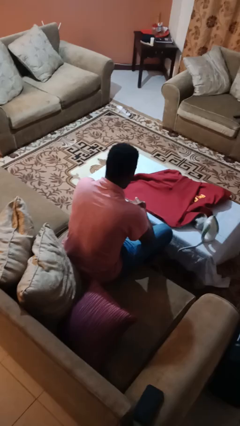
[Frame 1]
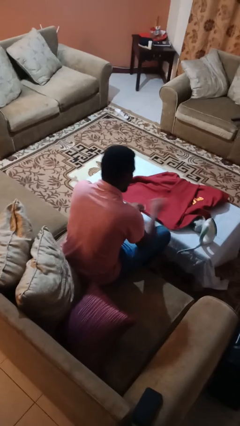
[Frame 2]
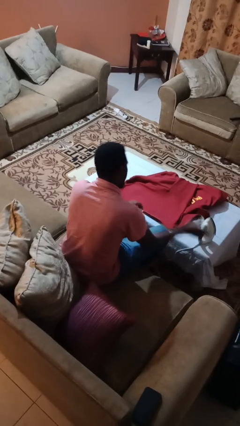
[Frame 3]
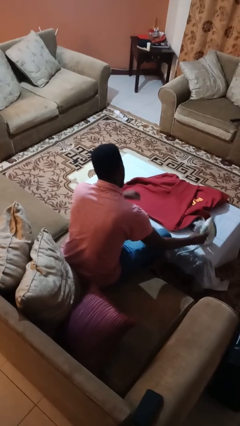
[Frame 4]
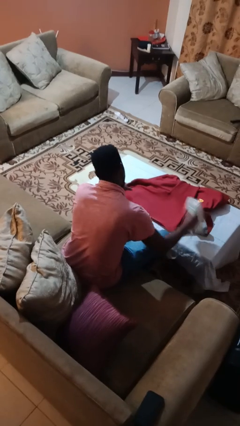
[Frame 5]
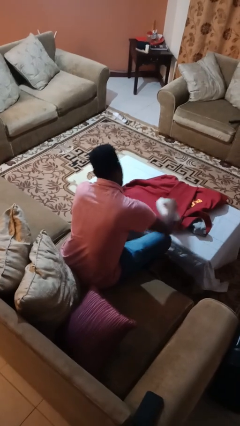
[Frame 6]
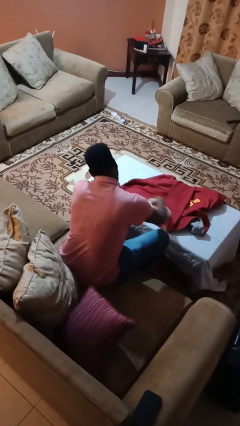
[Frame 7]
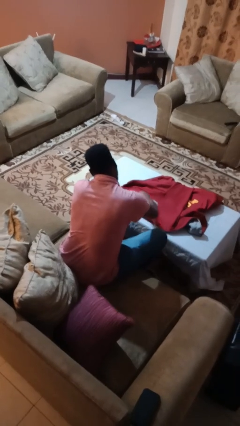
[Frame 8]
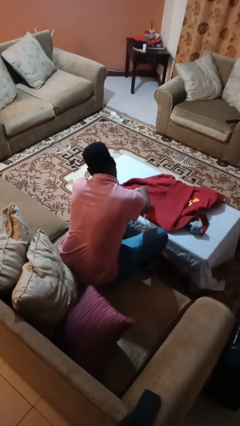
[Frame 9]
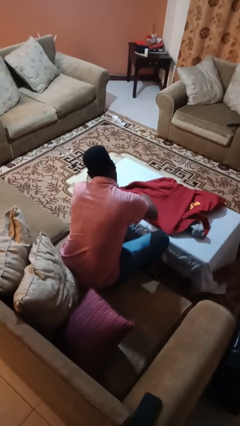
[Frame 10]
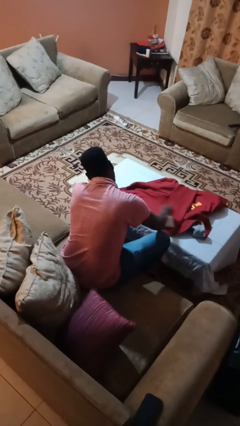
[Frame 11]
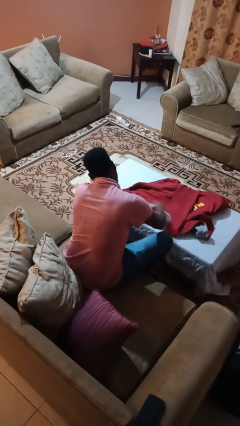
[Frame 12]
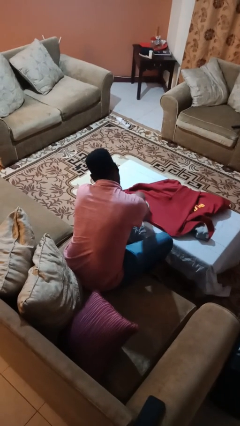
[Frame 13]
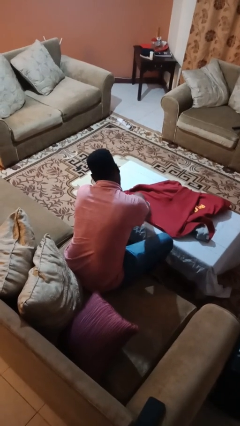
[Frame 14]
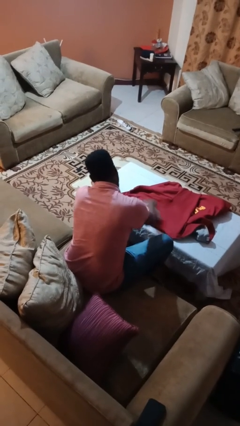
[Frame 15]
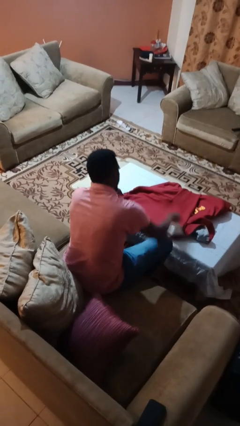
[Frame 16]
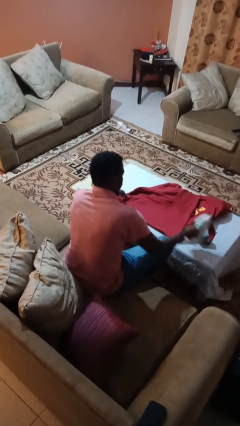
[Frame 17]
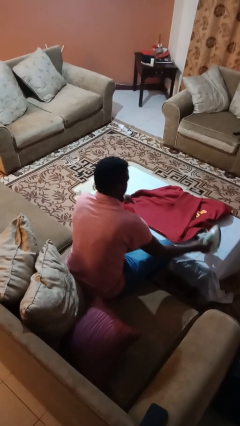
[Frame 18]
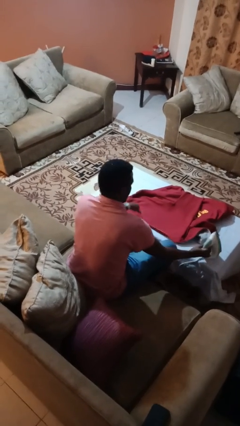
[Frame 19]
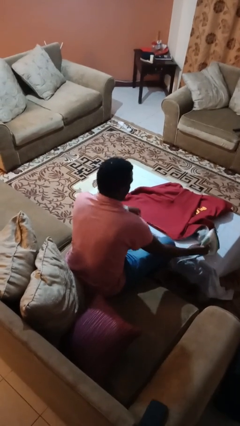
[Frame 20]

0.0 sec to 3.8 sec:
person irons clothes

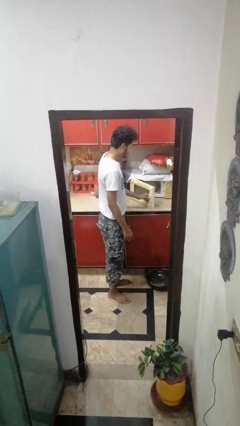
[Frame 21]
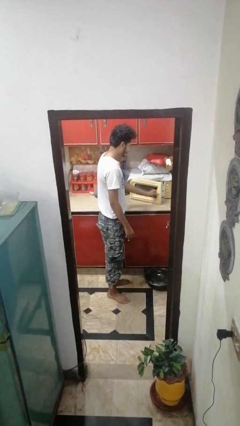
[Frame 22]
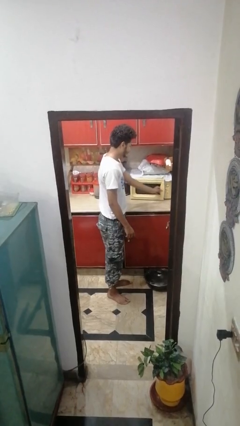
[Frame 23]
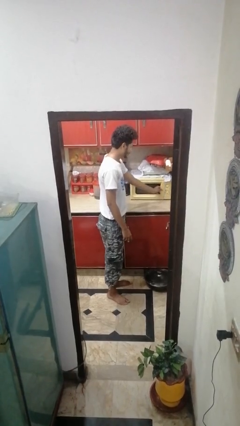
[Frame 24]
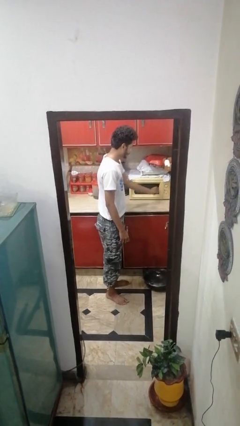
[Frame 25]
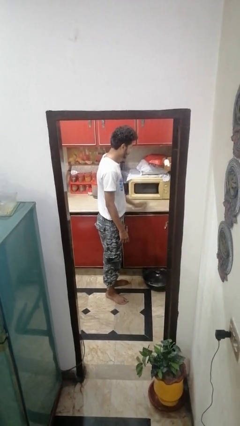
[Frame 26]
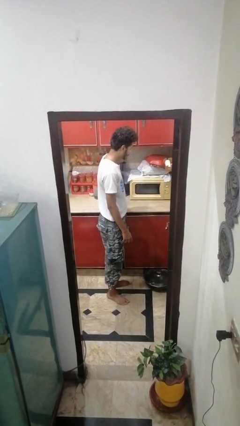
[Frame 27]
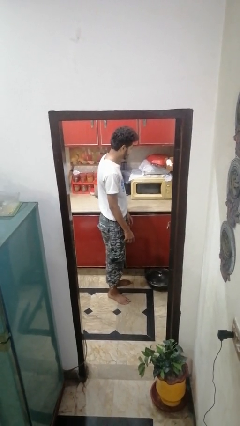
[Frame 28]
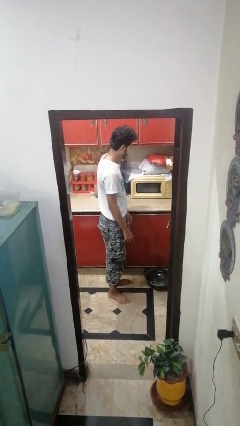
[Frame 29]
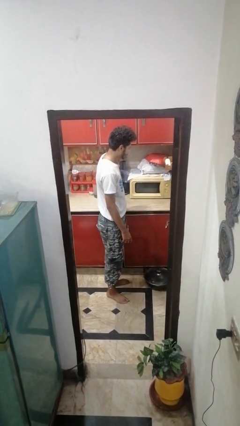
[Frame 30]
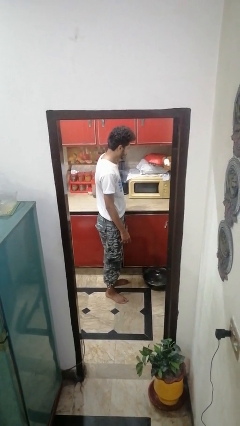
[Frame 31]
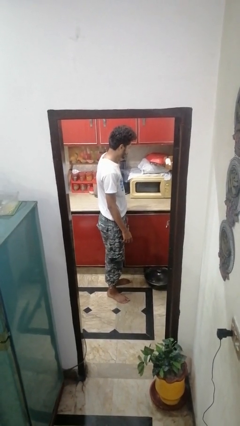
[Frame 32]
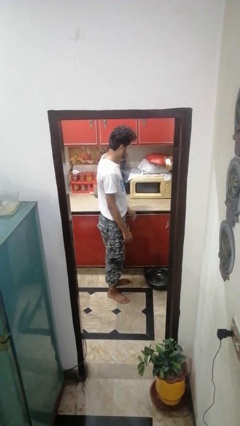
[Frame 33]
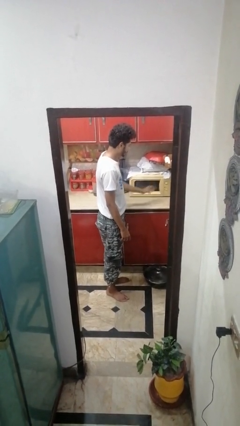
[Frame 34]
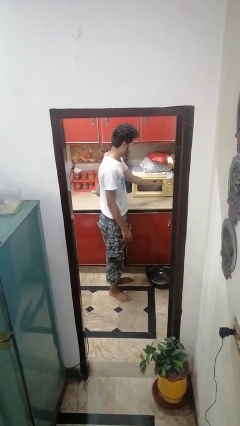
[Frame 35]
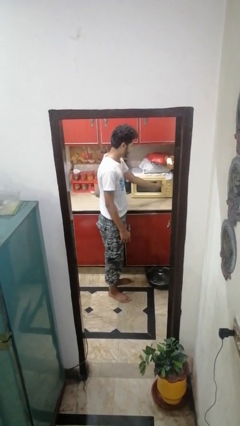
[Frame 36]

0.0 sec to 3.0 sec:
person closes microwave

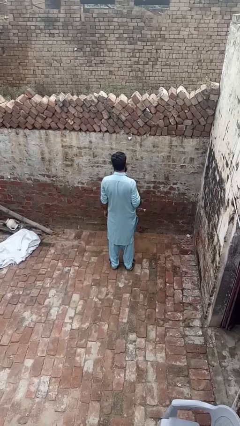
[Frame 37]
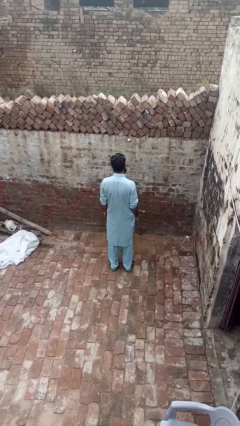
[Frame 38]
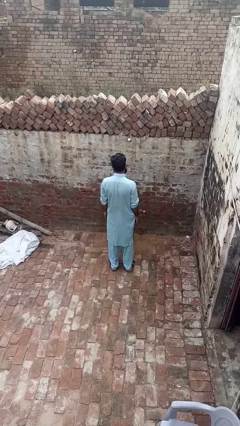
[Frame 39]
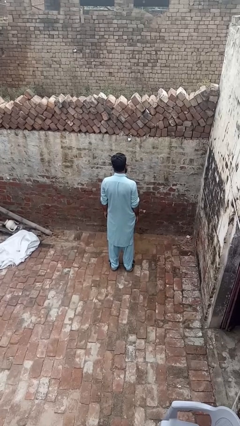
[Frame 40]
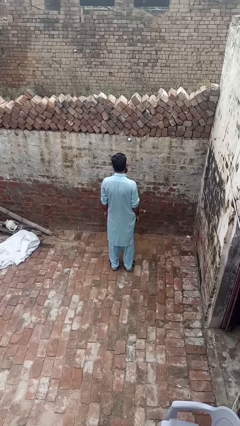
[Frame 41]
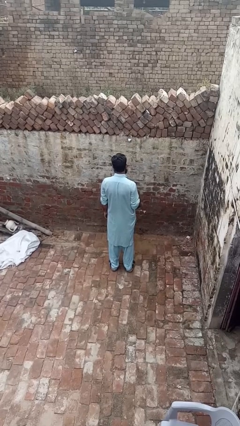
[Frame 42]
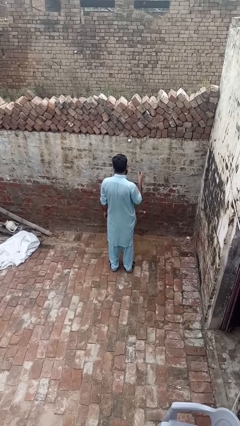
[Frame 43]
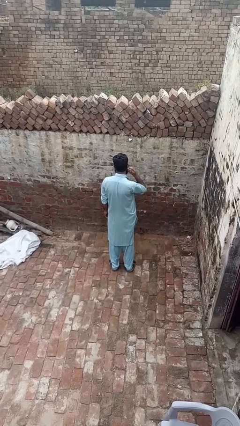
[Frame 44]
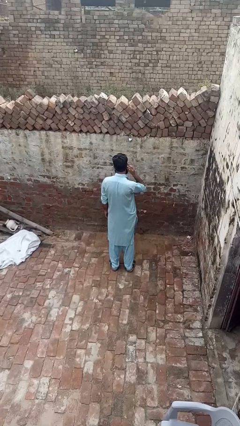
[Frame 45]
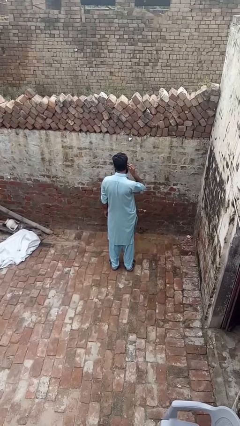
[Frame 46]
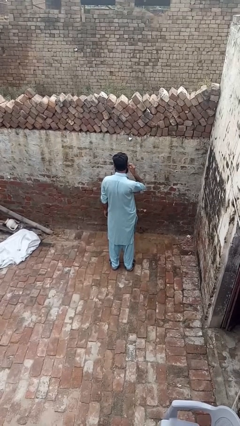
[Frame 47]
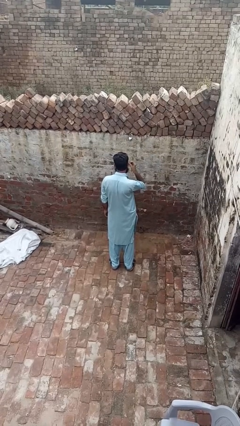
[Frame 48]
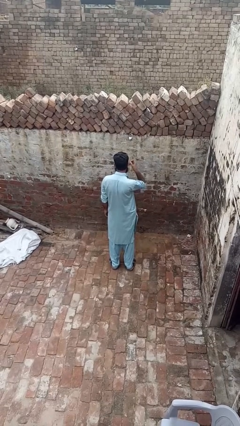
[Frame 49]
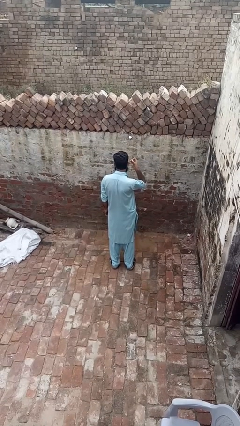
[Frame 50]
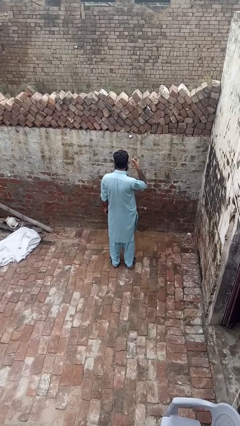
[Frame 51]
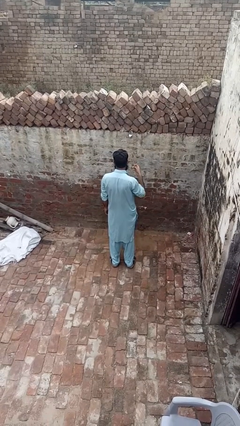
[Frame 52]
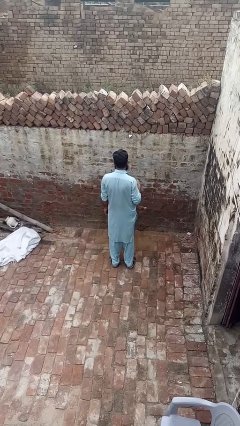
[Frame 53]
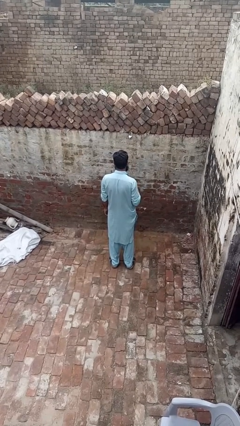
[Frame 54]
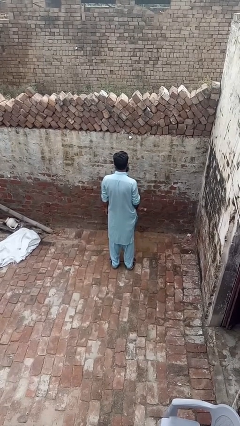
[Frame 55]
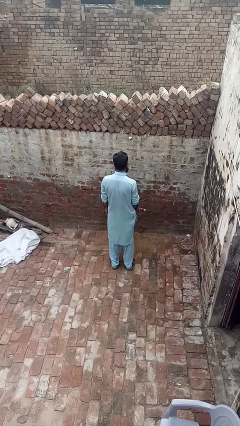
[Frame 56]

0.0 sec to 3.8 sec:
person takes off earrings

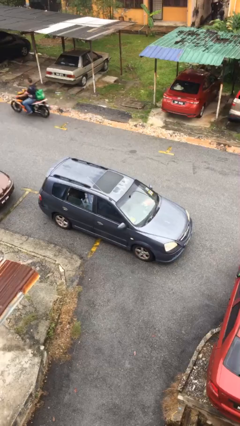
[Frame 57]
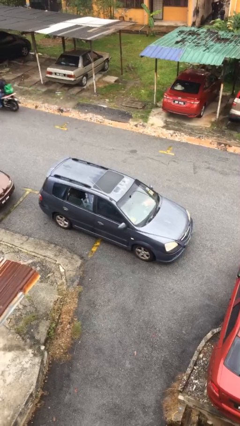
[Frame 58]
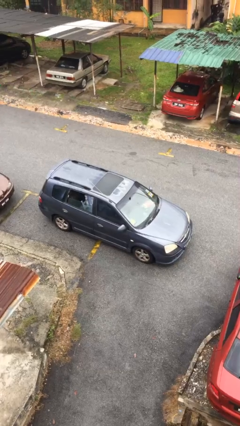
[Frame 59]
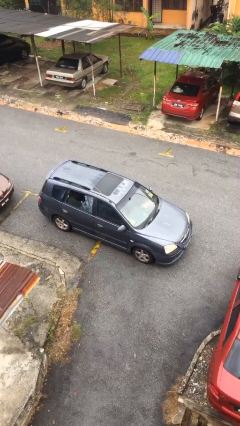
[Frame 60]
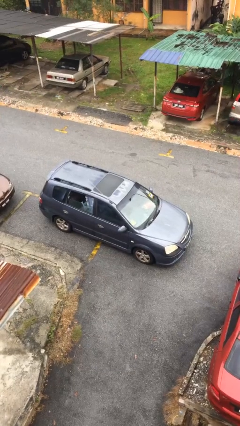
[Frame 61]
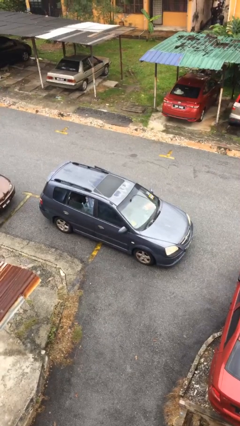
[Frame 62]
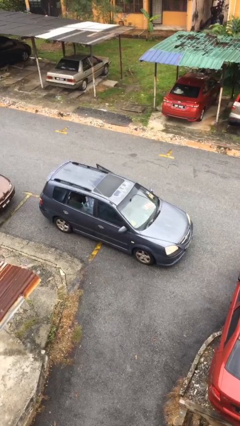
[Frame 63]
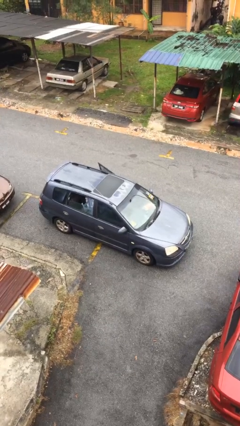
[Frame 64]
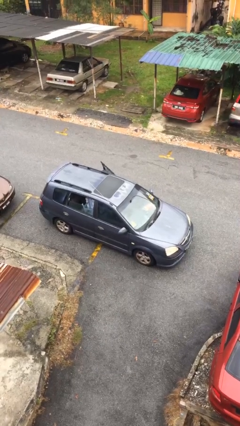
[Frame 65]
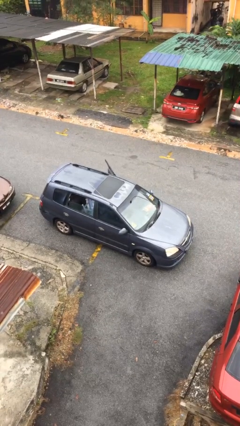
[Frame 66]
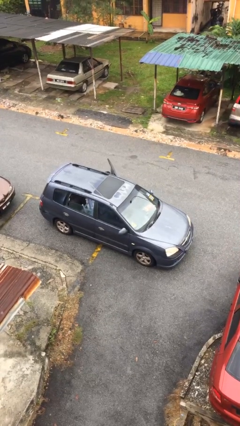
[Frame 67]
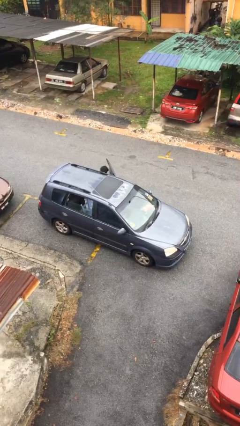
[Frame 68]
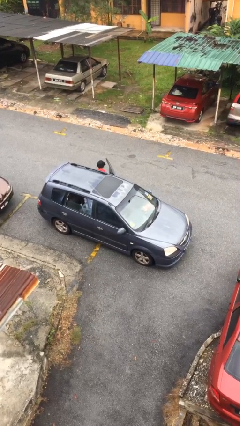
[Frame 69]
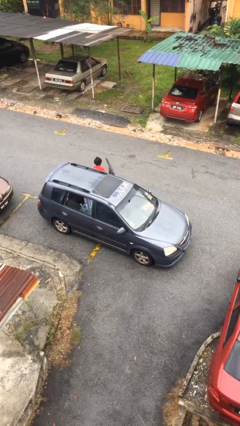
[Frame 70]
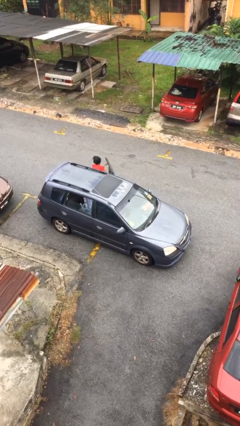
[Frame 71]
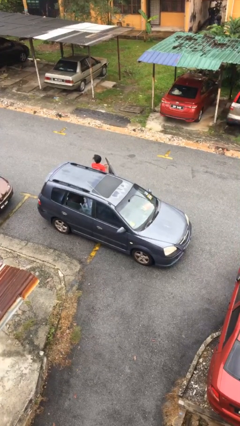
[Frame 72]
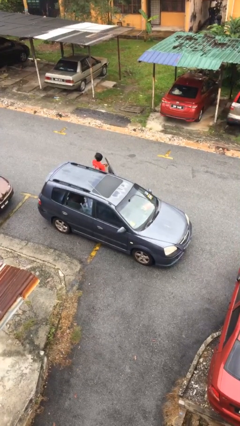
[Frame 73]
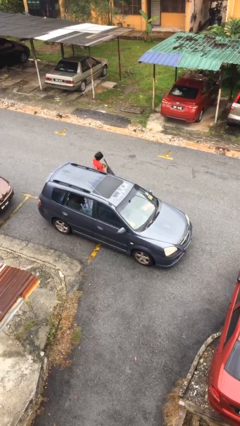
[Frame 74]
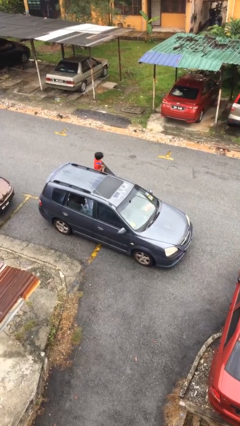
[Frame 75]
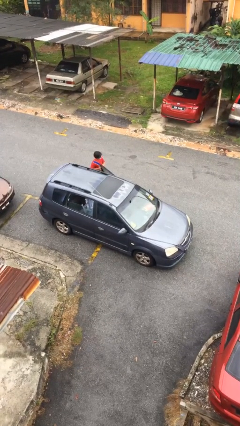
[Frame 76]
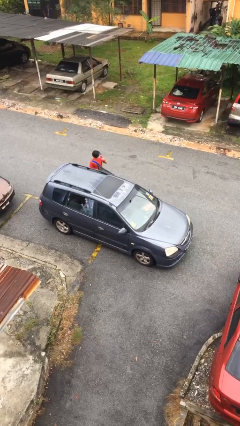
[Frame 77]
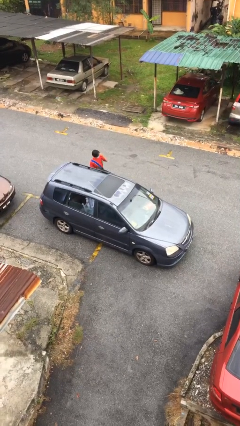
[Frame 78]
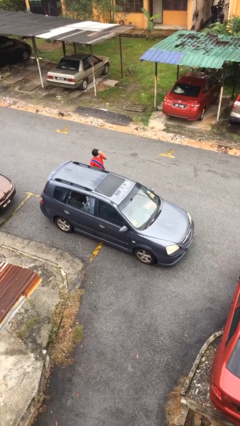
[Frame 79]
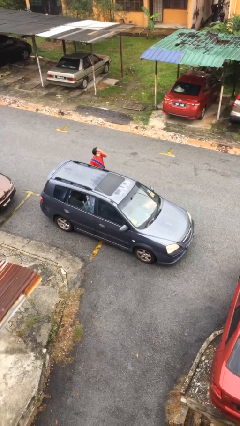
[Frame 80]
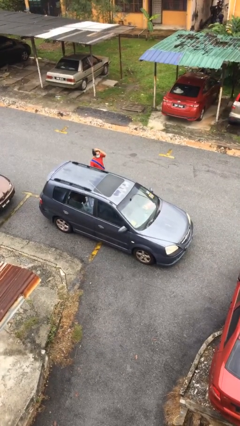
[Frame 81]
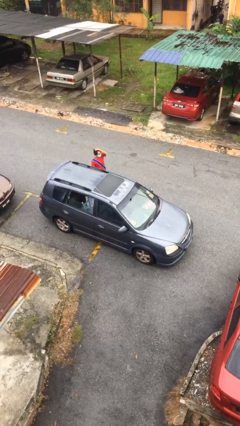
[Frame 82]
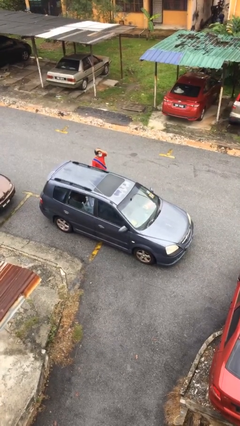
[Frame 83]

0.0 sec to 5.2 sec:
car drops off person

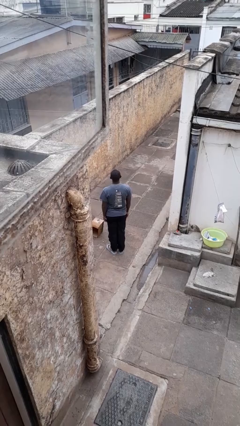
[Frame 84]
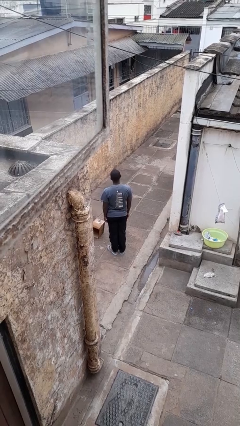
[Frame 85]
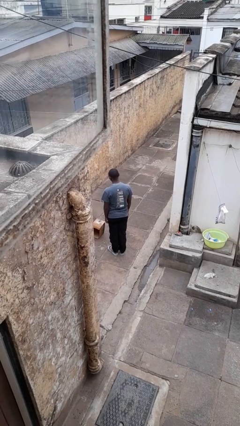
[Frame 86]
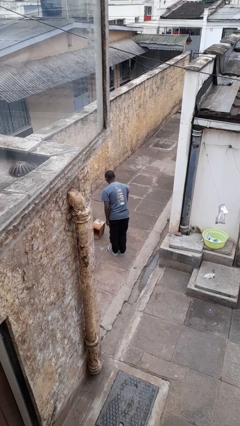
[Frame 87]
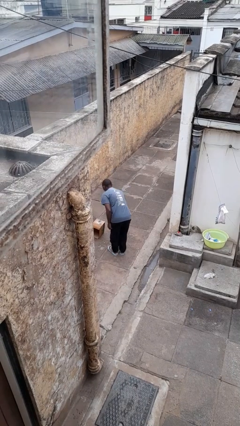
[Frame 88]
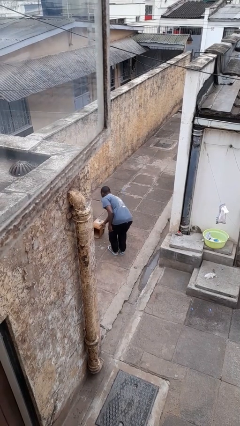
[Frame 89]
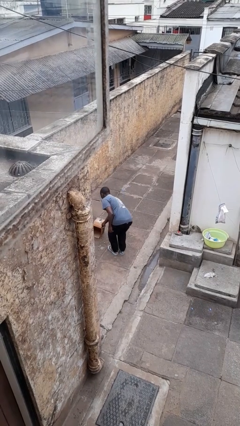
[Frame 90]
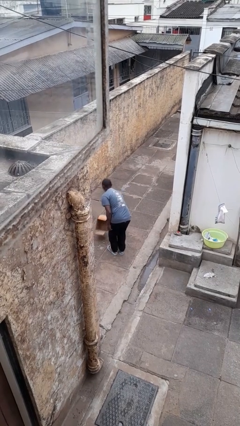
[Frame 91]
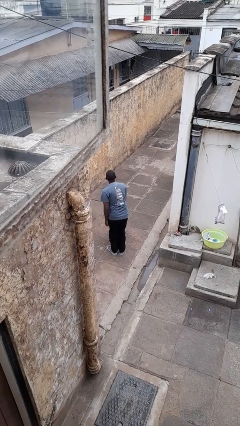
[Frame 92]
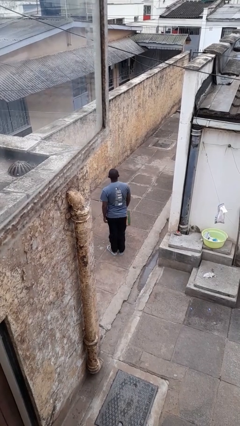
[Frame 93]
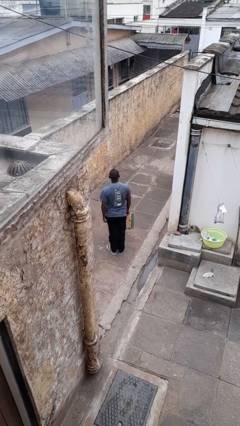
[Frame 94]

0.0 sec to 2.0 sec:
person picks up object from floor
